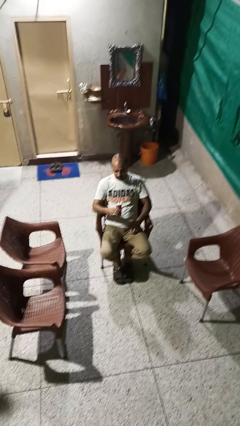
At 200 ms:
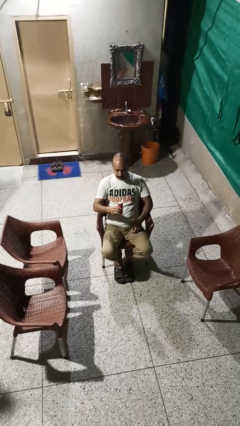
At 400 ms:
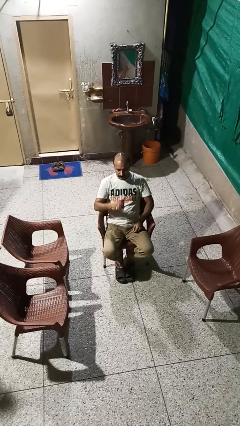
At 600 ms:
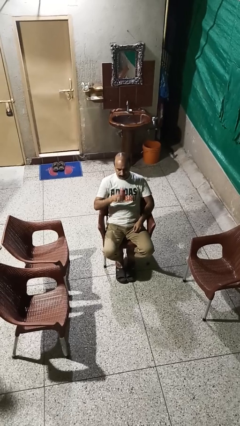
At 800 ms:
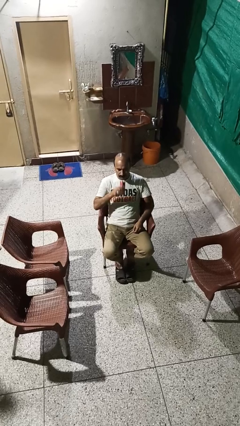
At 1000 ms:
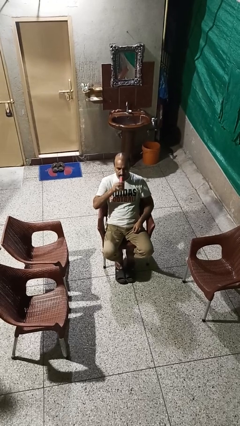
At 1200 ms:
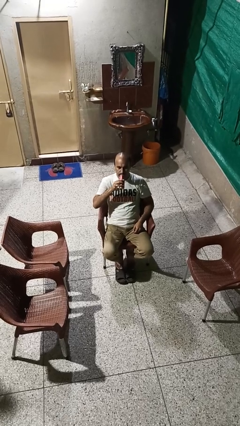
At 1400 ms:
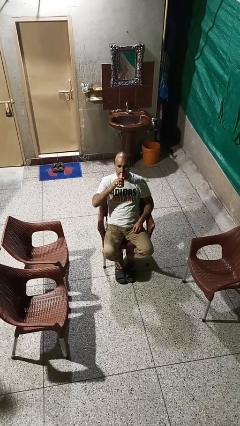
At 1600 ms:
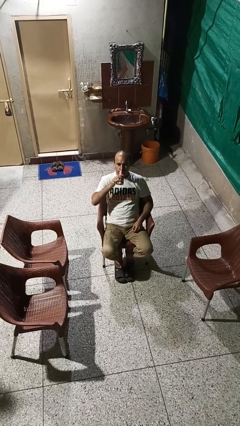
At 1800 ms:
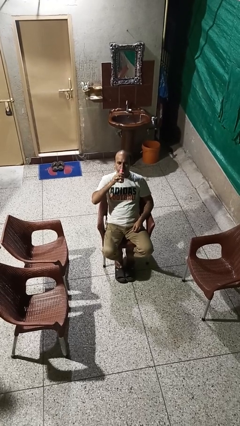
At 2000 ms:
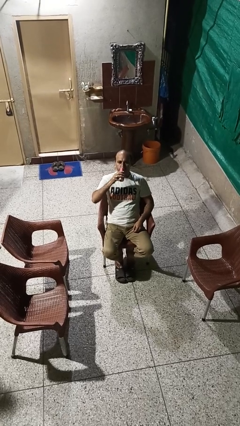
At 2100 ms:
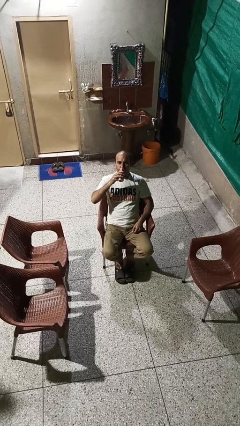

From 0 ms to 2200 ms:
person drinks from beverage can

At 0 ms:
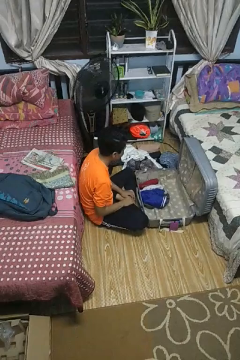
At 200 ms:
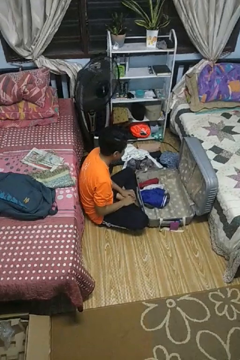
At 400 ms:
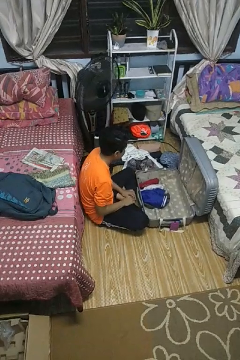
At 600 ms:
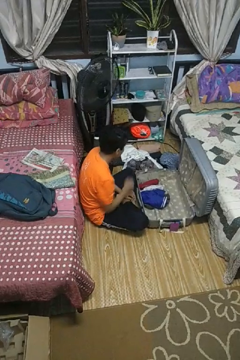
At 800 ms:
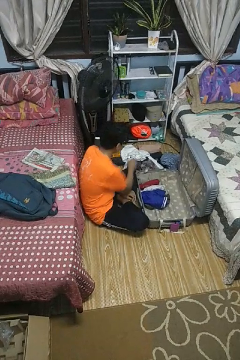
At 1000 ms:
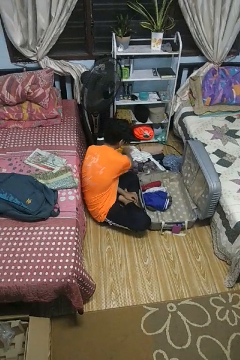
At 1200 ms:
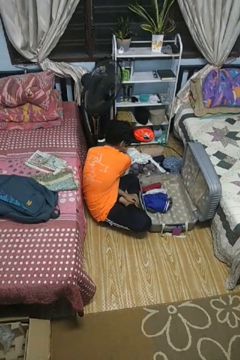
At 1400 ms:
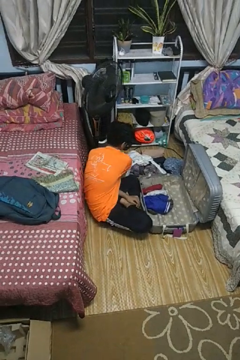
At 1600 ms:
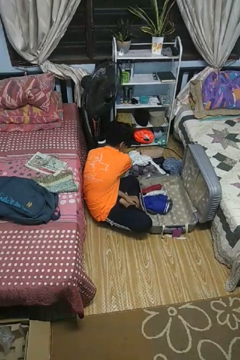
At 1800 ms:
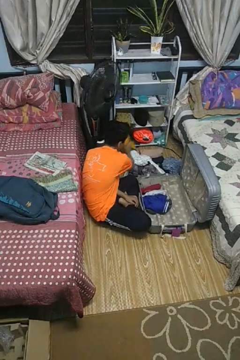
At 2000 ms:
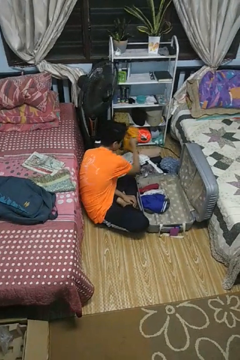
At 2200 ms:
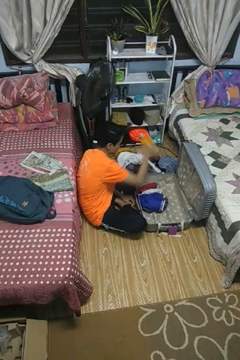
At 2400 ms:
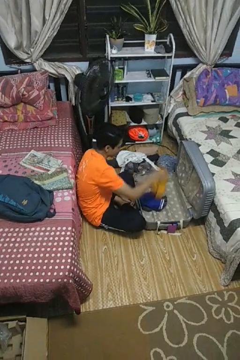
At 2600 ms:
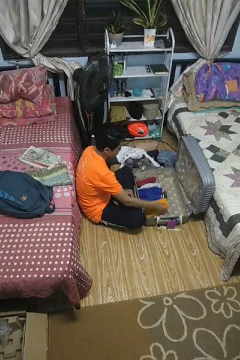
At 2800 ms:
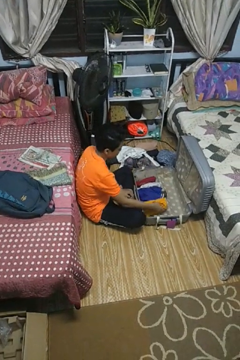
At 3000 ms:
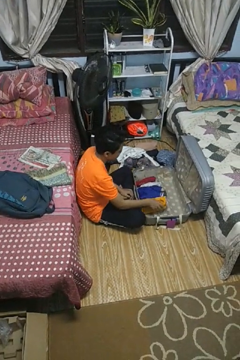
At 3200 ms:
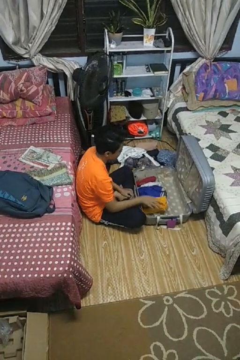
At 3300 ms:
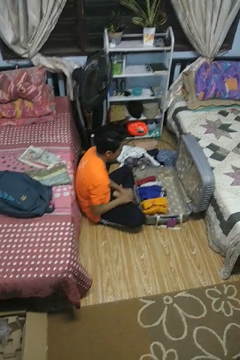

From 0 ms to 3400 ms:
person loads clothes into suitcase

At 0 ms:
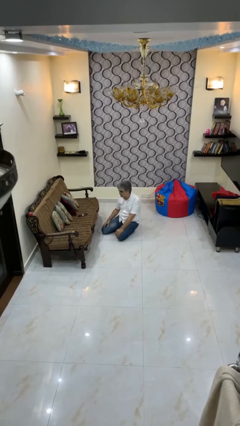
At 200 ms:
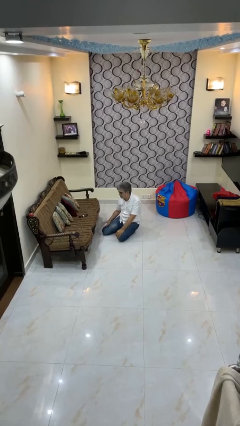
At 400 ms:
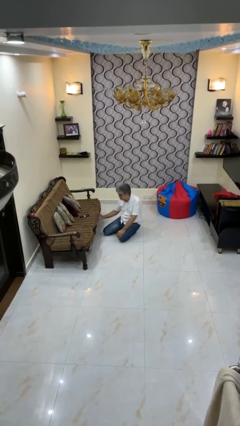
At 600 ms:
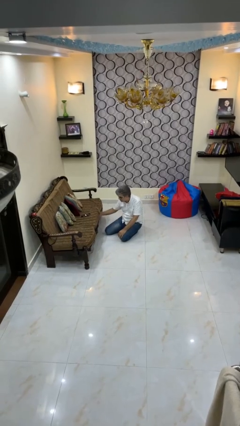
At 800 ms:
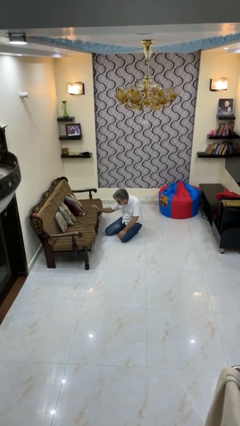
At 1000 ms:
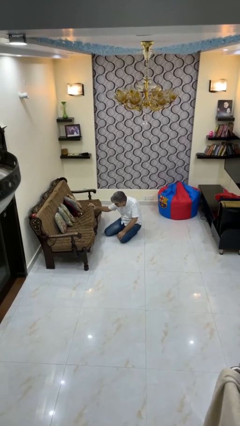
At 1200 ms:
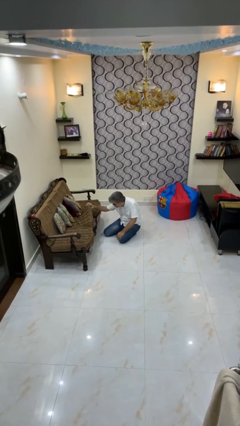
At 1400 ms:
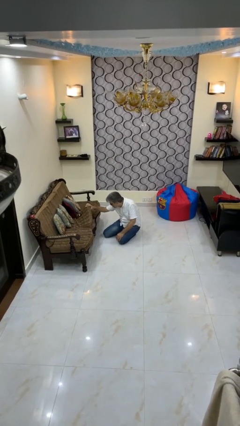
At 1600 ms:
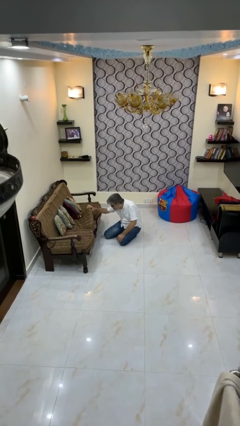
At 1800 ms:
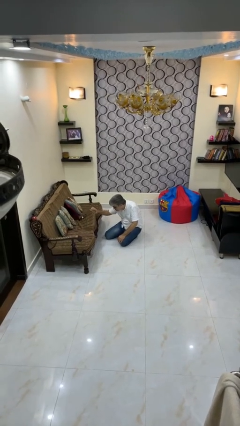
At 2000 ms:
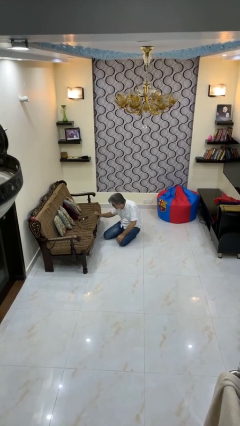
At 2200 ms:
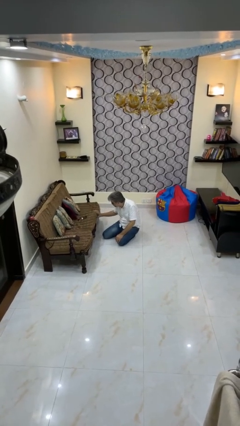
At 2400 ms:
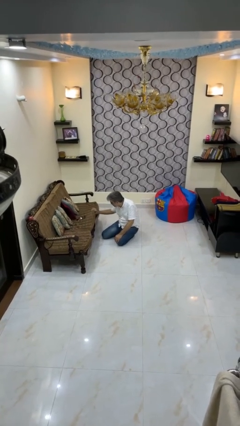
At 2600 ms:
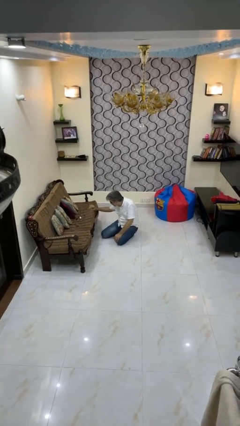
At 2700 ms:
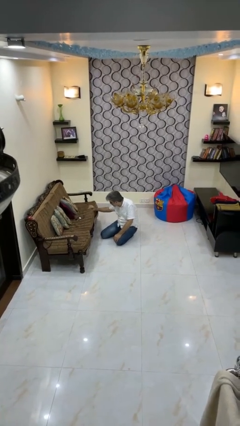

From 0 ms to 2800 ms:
person searches under couch

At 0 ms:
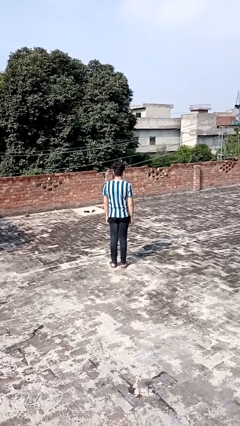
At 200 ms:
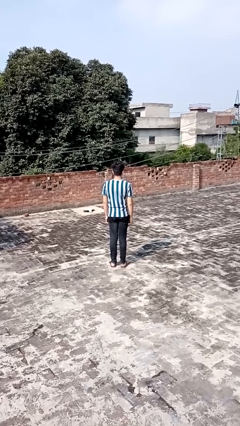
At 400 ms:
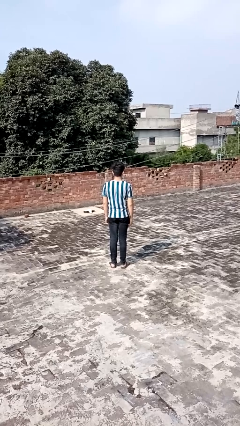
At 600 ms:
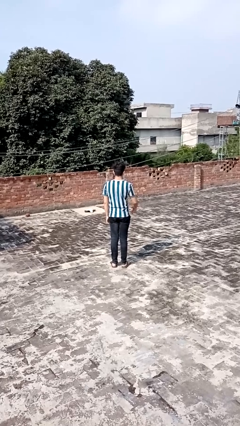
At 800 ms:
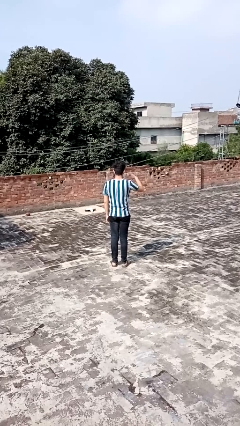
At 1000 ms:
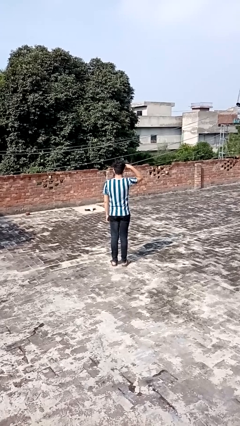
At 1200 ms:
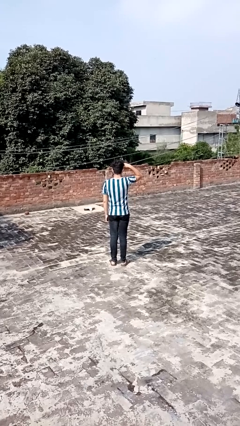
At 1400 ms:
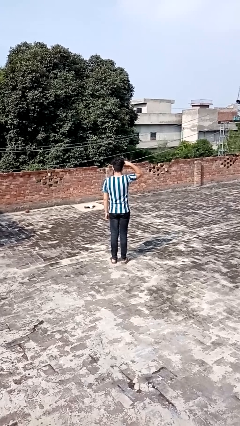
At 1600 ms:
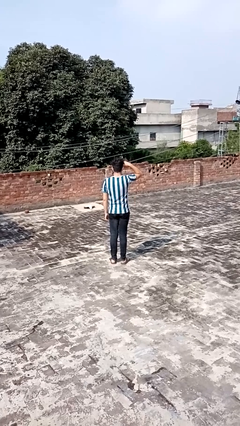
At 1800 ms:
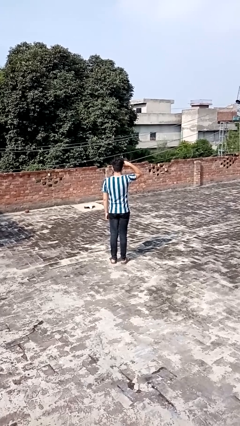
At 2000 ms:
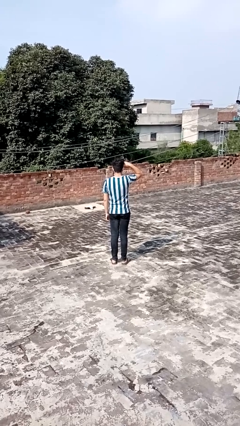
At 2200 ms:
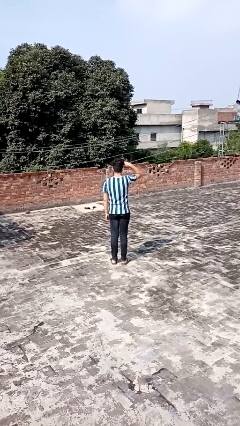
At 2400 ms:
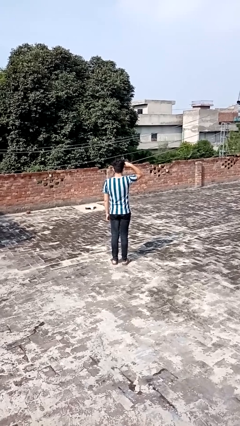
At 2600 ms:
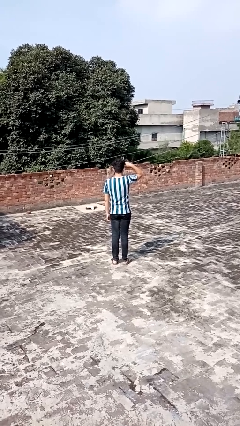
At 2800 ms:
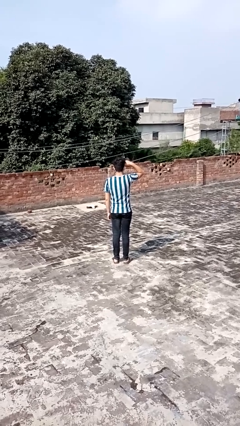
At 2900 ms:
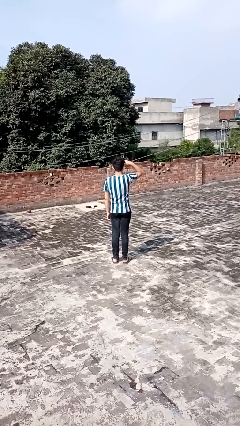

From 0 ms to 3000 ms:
person salutes

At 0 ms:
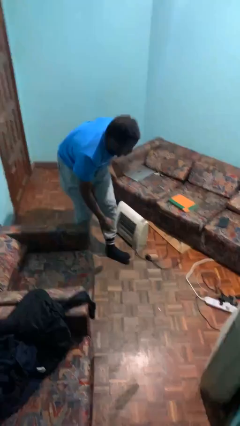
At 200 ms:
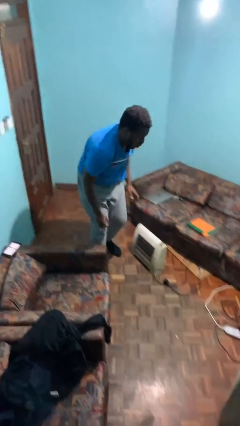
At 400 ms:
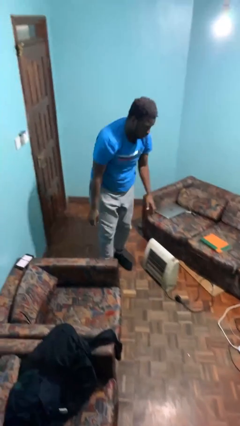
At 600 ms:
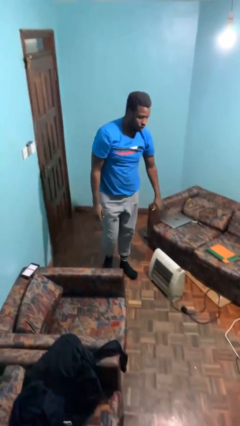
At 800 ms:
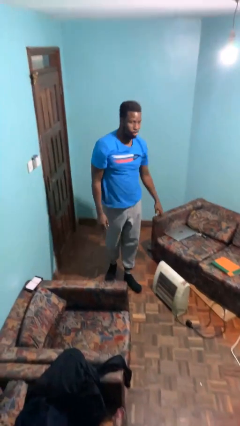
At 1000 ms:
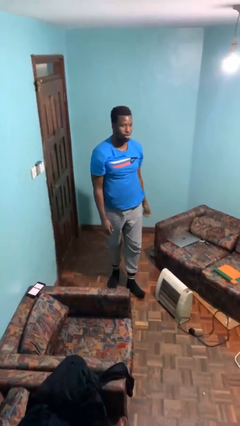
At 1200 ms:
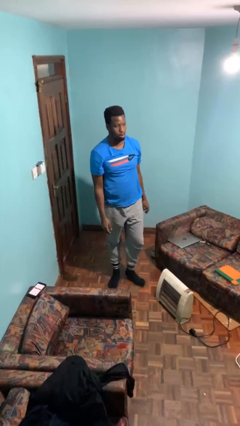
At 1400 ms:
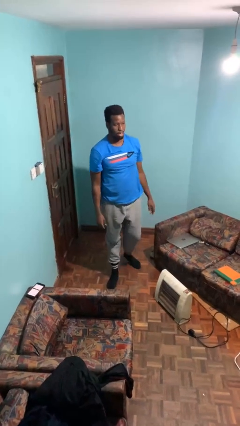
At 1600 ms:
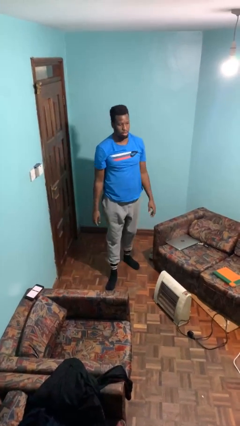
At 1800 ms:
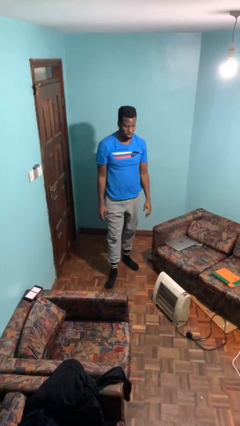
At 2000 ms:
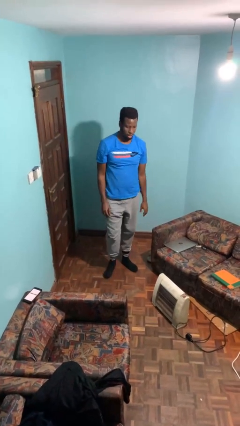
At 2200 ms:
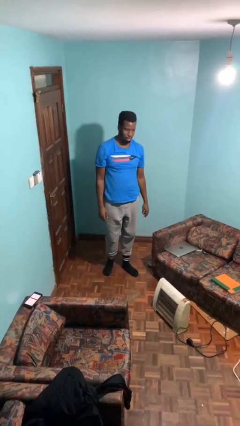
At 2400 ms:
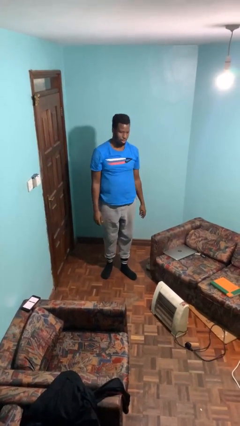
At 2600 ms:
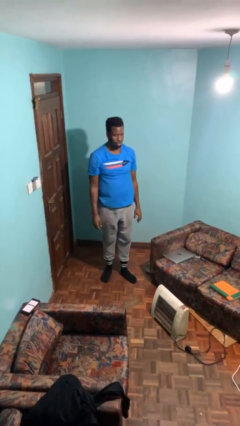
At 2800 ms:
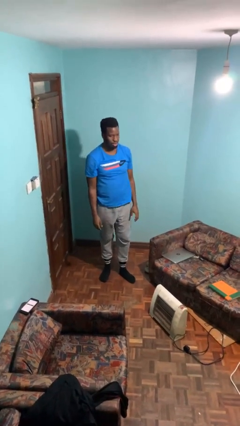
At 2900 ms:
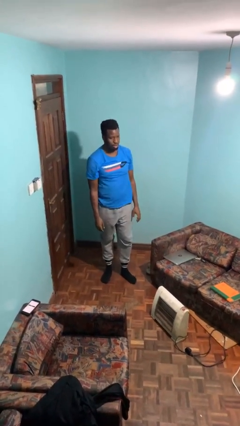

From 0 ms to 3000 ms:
person stands up from floor

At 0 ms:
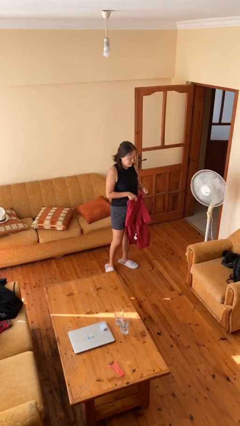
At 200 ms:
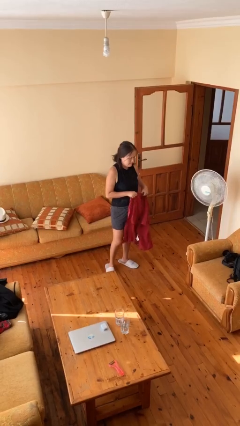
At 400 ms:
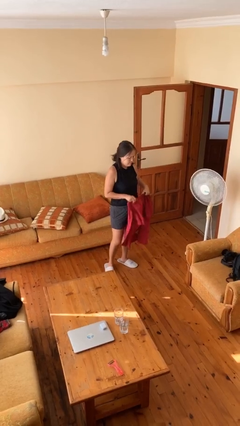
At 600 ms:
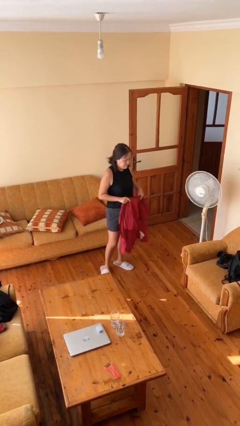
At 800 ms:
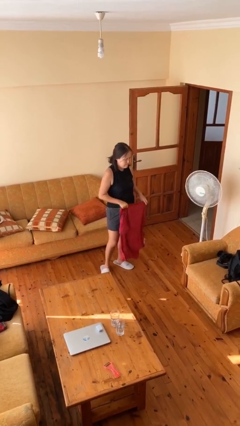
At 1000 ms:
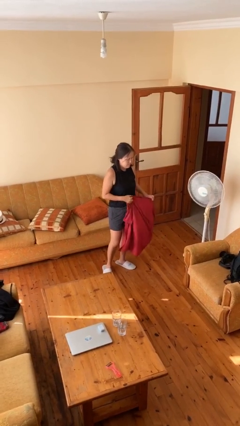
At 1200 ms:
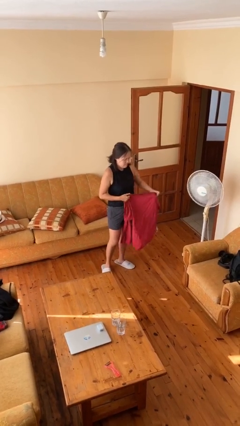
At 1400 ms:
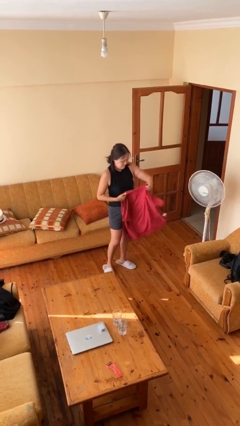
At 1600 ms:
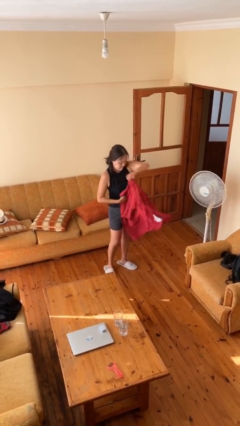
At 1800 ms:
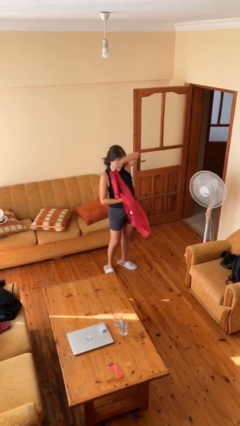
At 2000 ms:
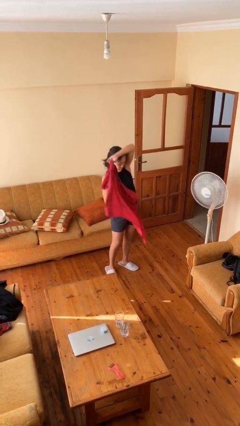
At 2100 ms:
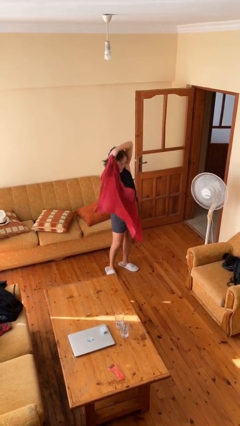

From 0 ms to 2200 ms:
person puts on shirt

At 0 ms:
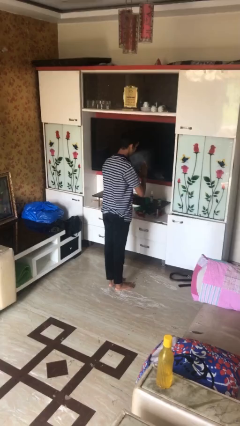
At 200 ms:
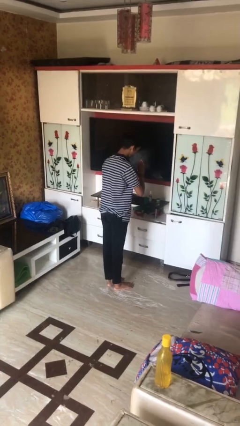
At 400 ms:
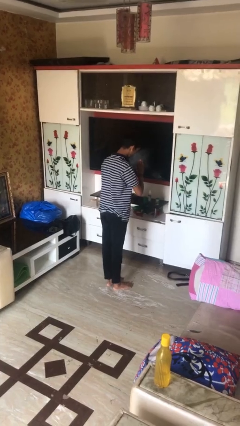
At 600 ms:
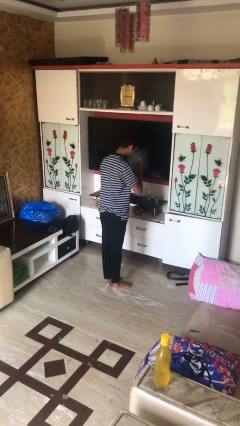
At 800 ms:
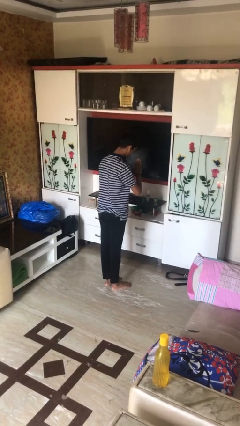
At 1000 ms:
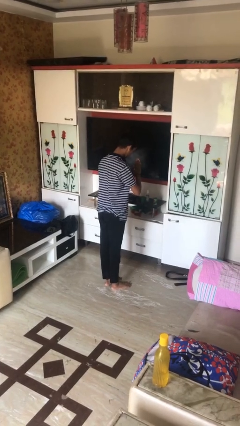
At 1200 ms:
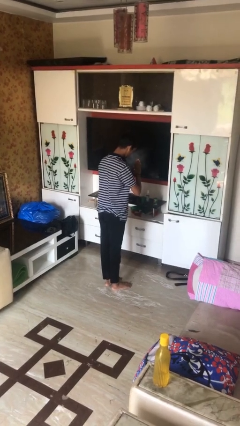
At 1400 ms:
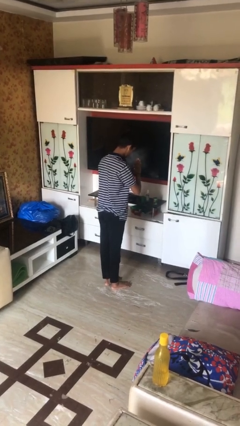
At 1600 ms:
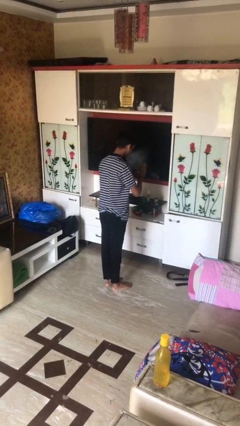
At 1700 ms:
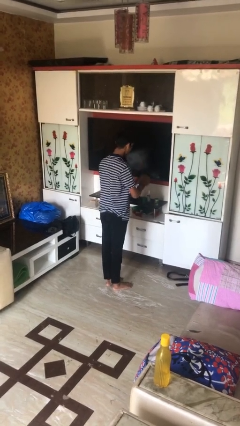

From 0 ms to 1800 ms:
person prays
